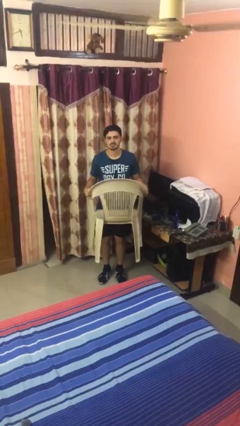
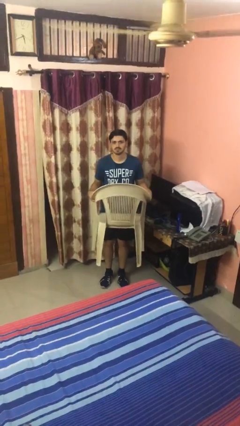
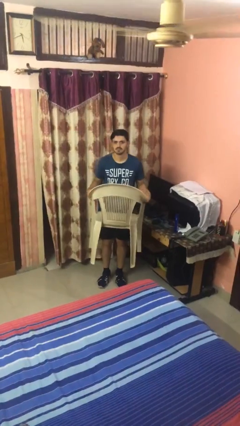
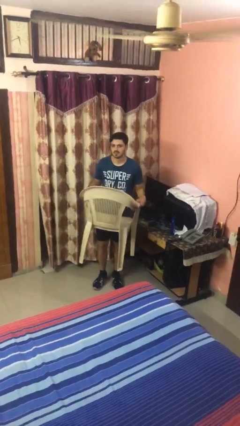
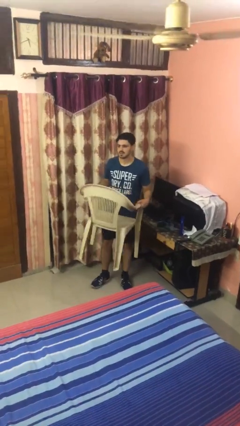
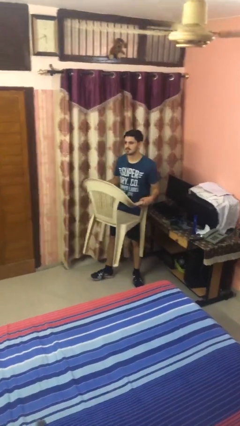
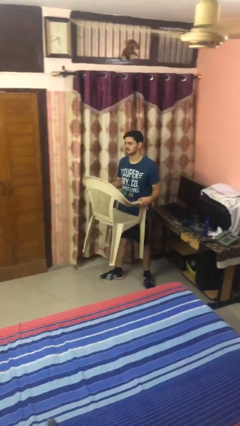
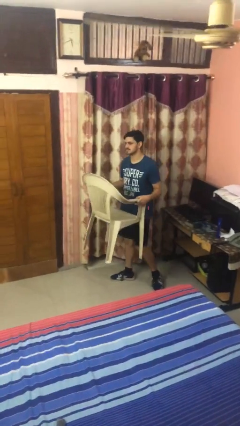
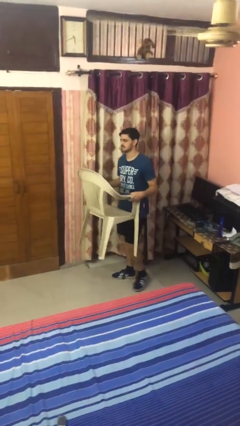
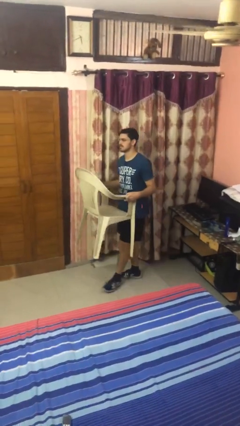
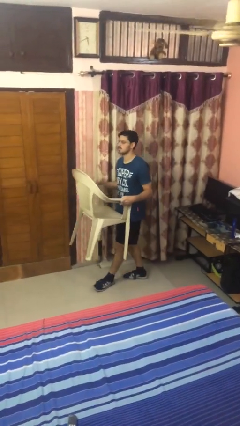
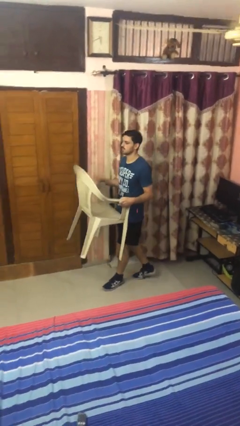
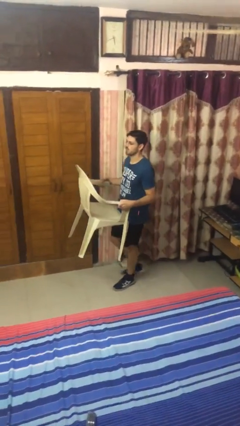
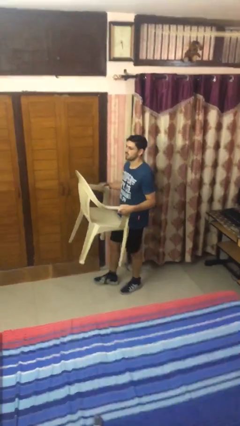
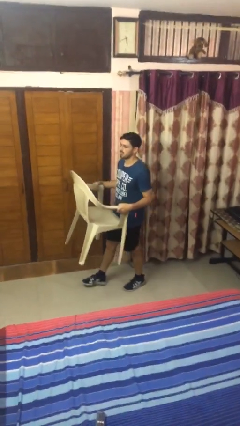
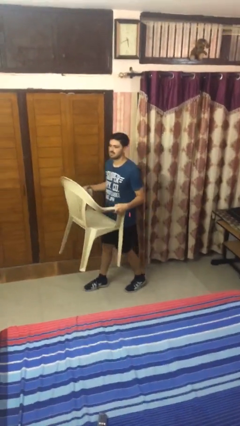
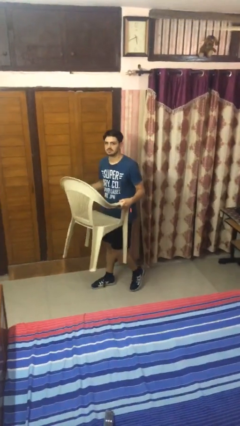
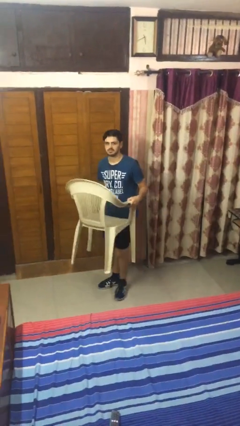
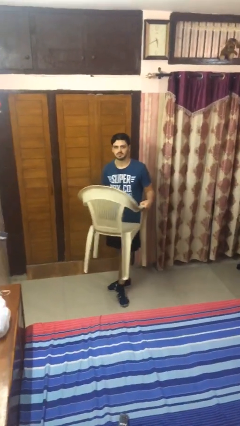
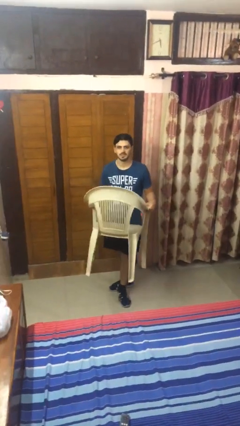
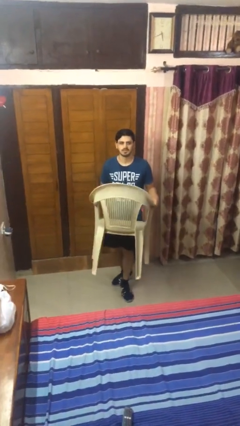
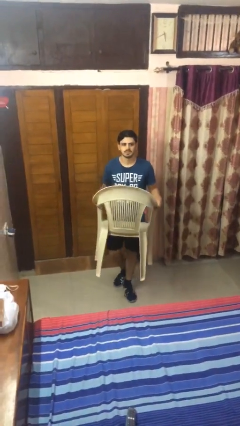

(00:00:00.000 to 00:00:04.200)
person carries furniture

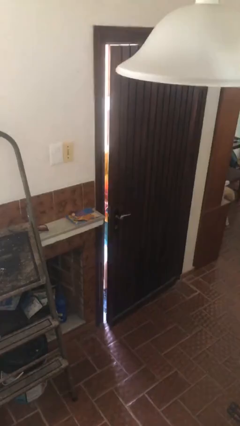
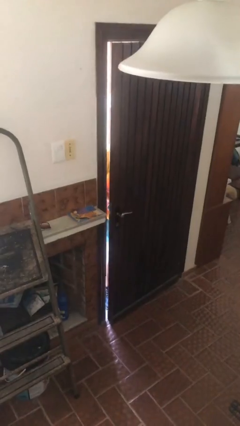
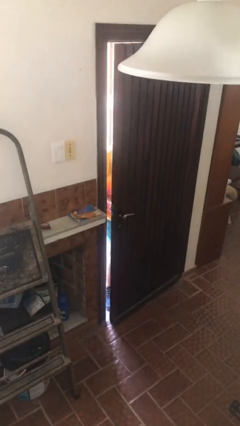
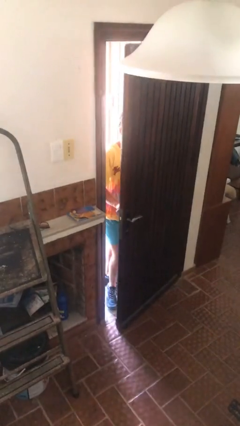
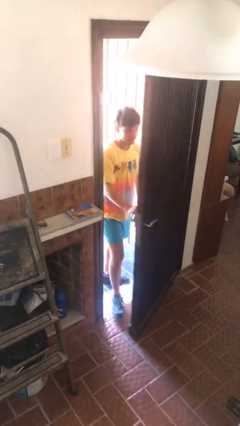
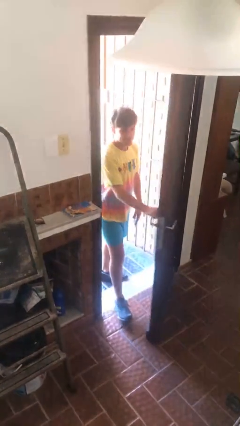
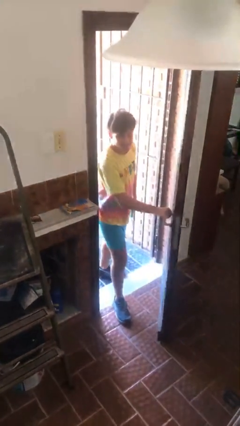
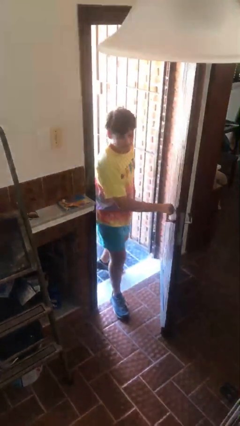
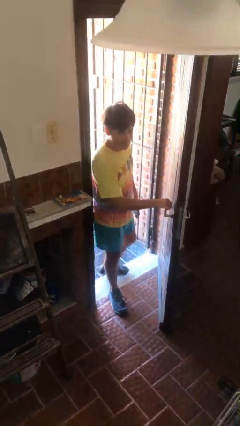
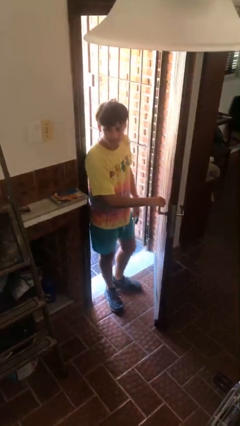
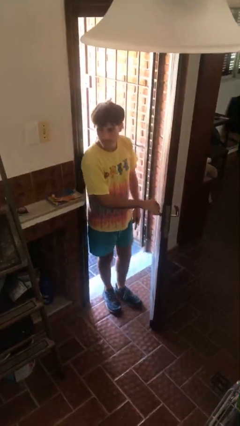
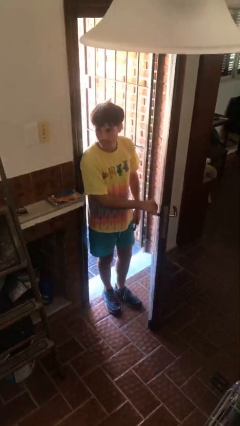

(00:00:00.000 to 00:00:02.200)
person opens facility door

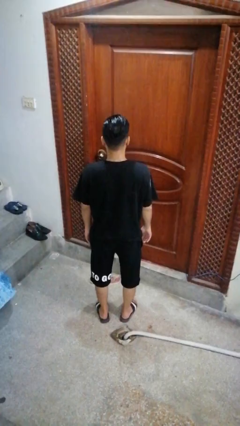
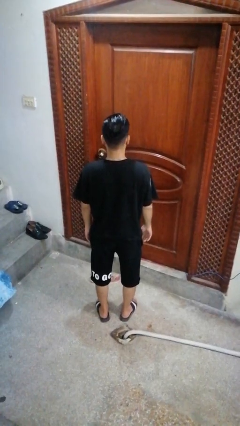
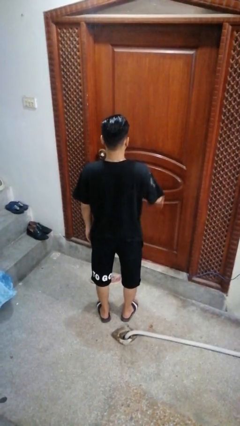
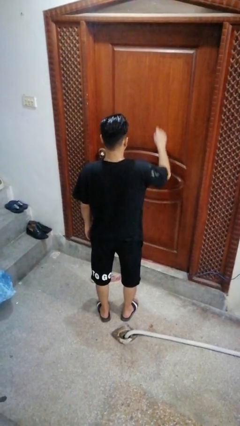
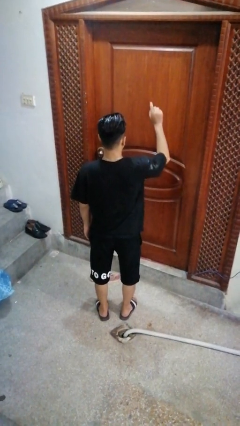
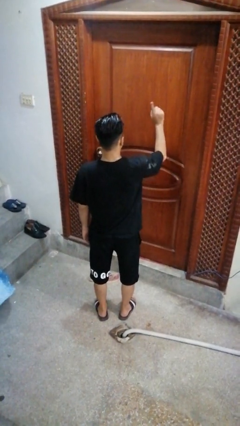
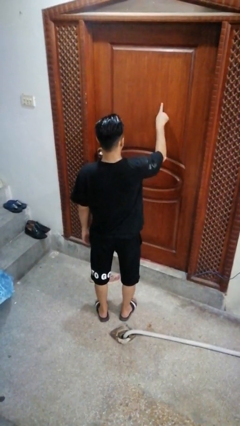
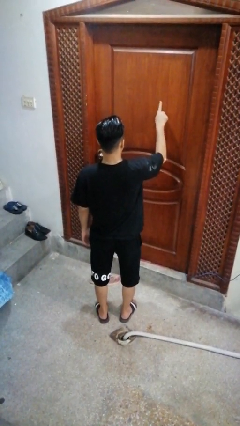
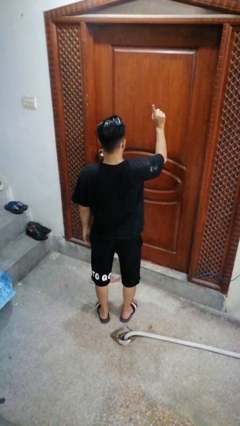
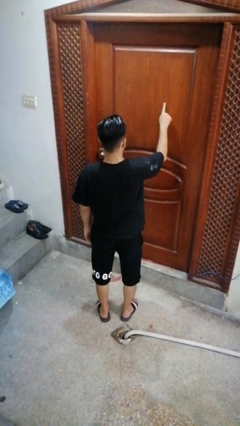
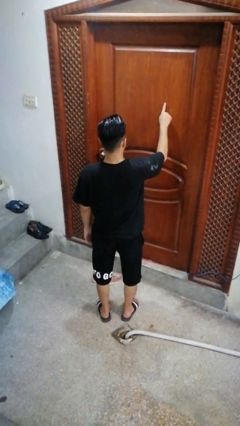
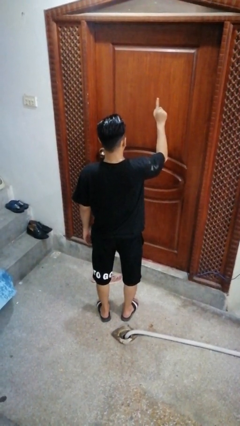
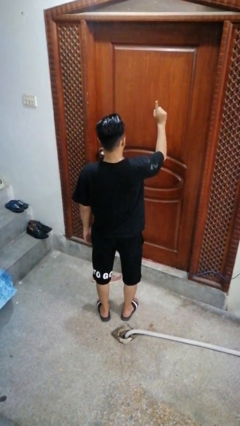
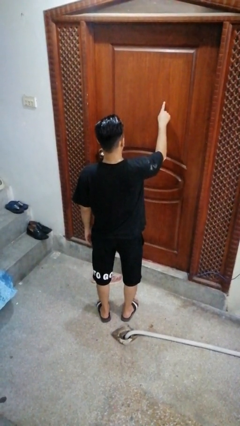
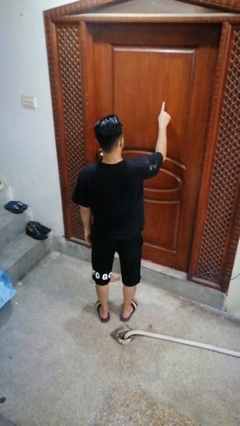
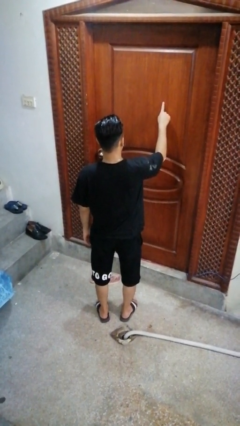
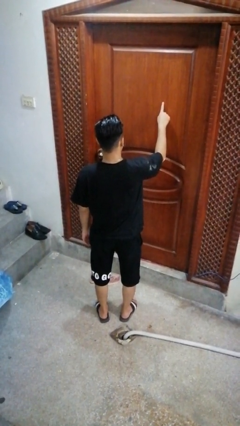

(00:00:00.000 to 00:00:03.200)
person taps object with finger

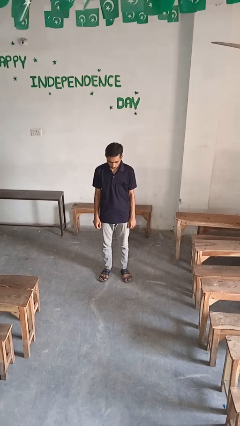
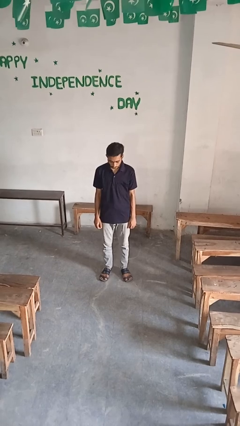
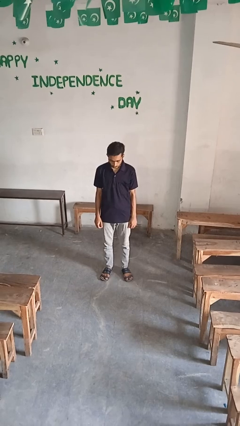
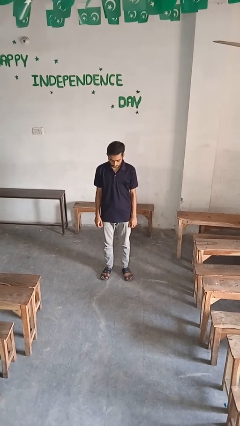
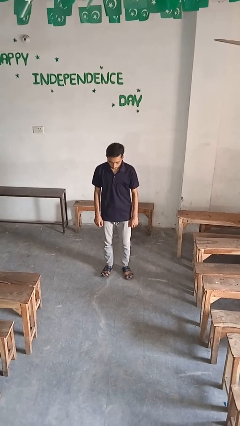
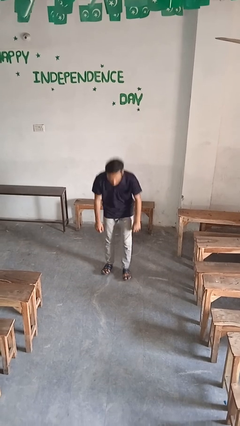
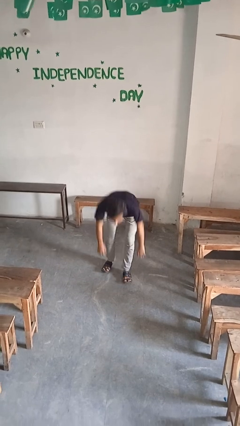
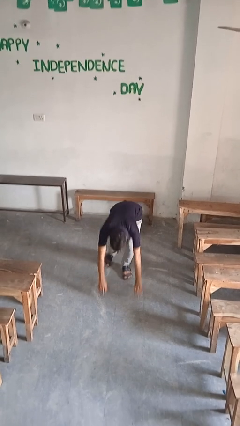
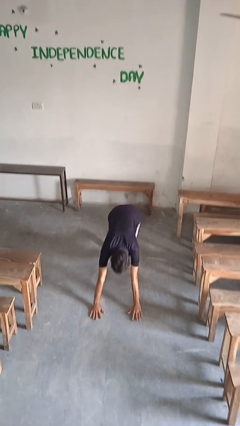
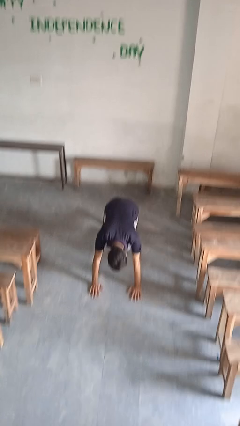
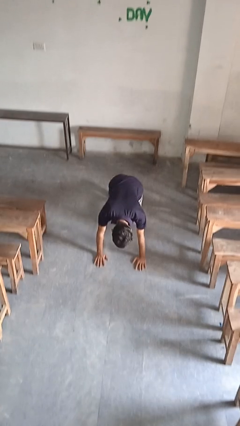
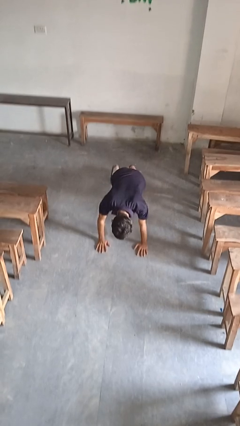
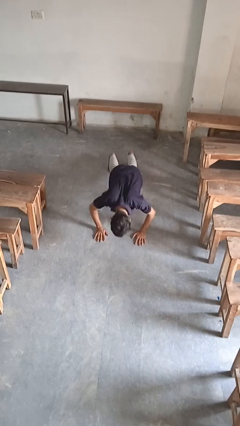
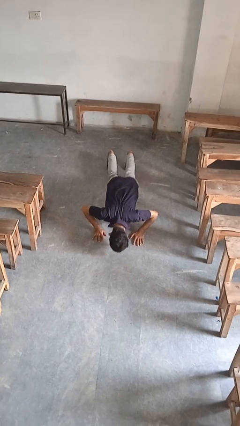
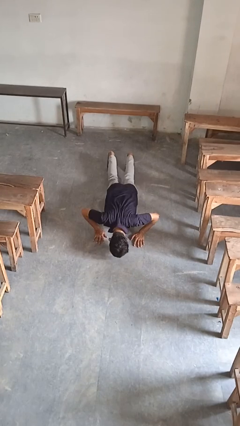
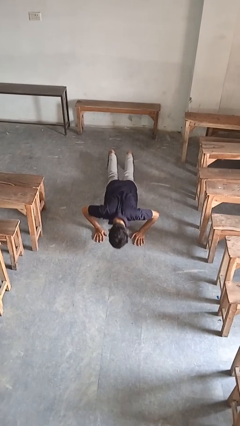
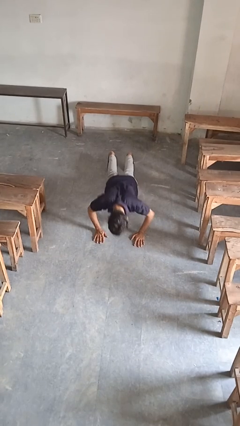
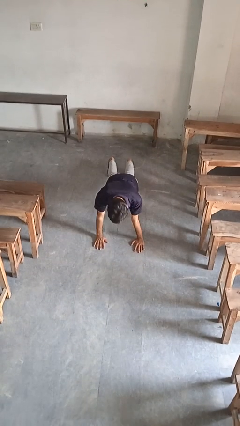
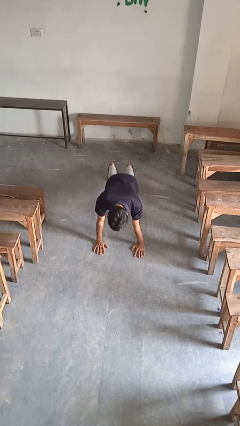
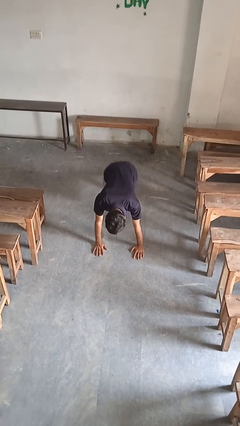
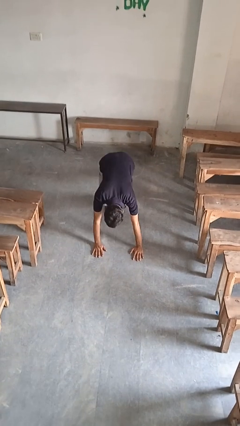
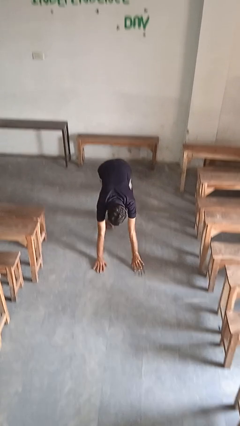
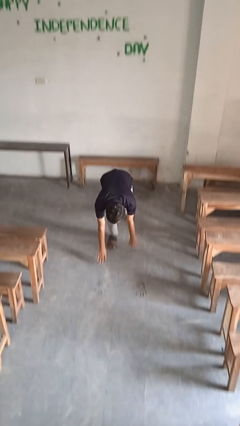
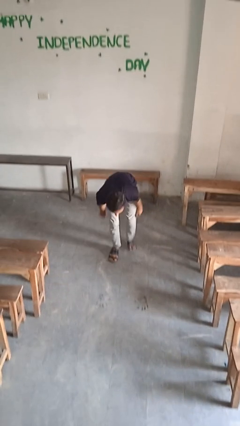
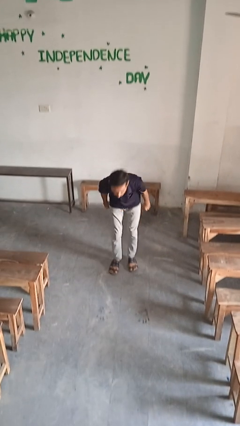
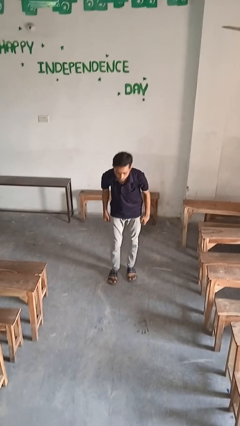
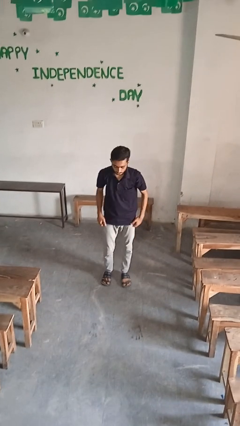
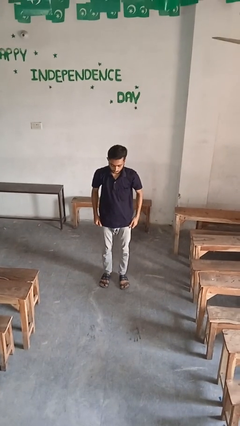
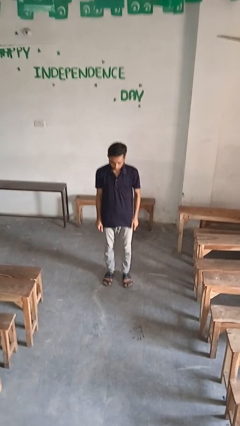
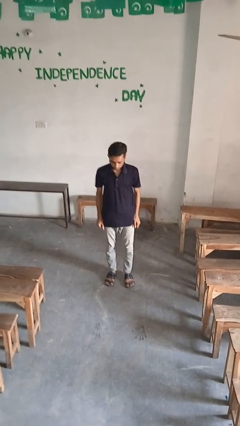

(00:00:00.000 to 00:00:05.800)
person exercises with pushup
